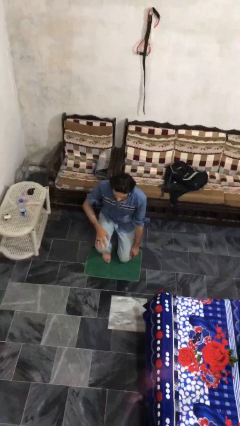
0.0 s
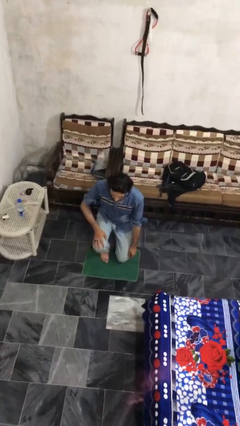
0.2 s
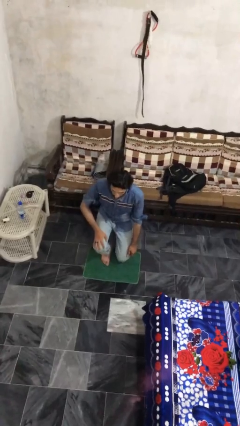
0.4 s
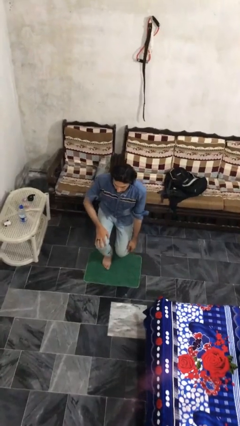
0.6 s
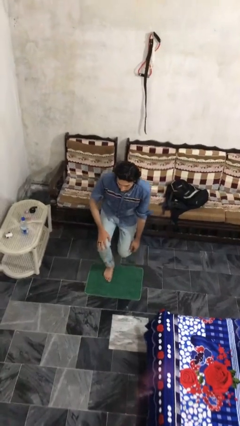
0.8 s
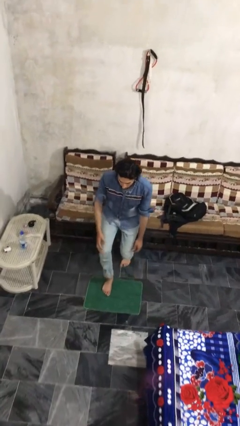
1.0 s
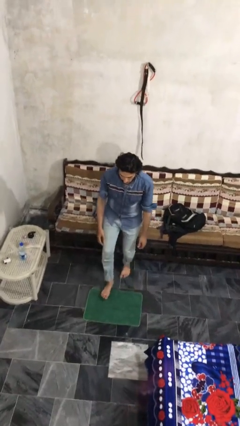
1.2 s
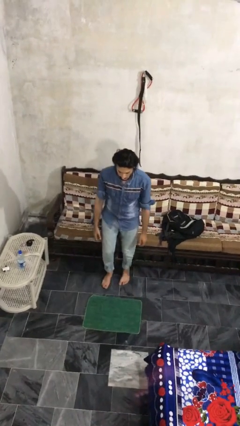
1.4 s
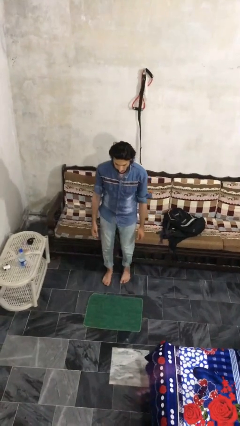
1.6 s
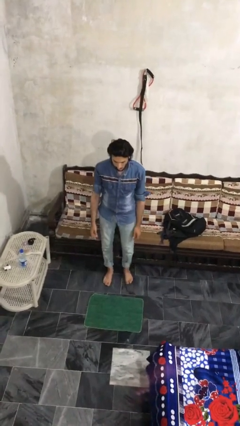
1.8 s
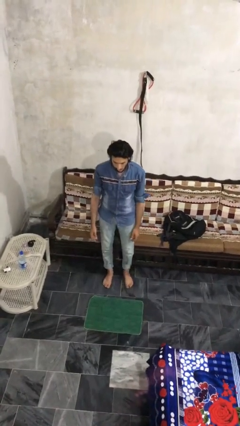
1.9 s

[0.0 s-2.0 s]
person stands up from floor

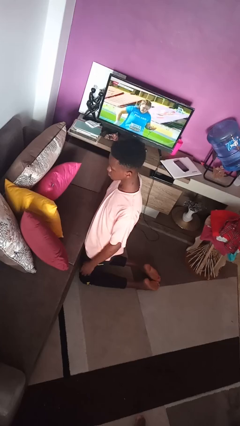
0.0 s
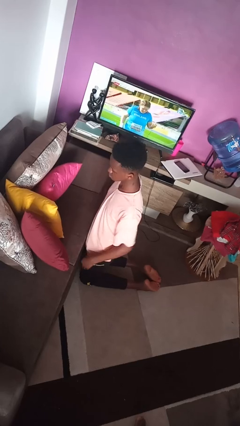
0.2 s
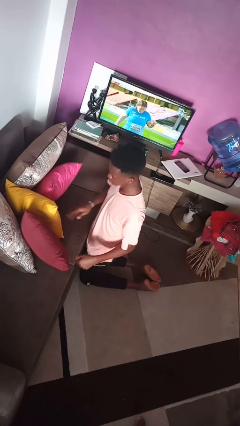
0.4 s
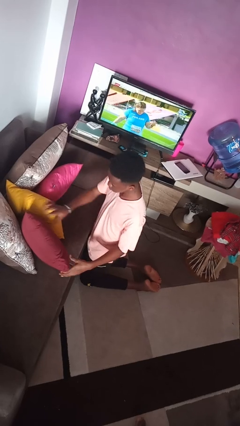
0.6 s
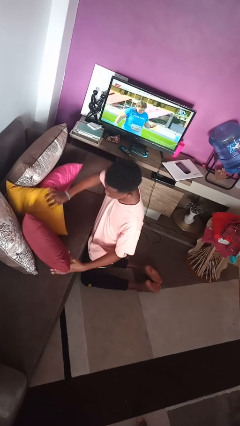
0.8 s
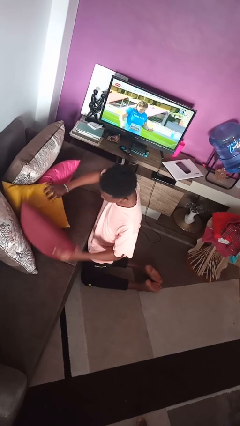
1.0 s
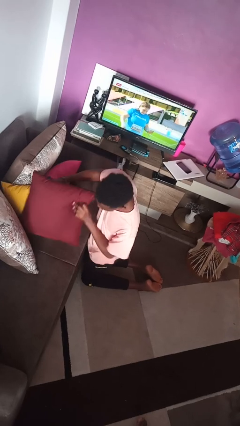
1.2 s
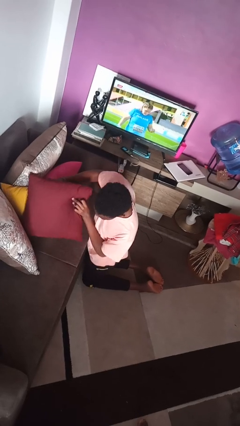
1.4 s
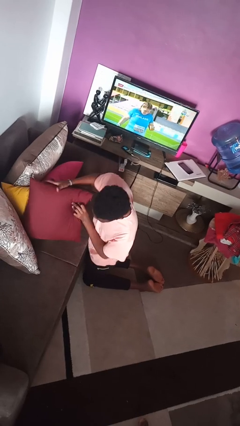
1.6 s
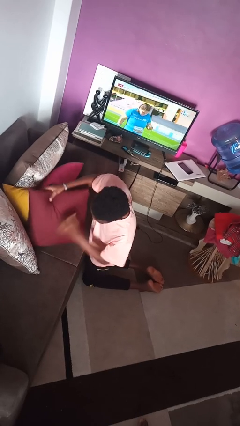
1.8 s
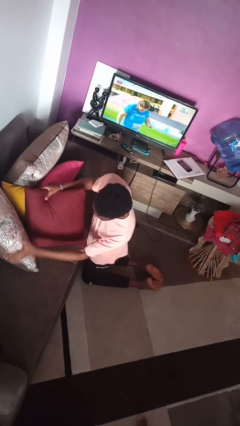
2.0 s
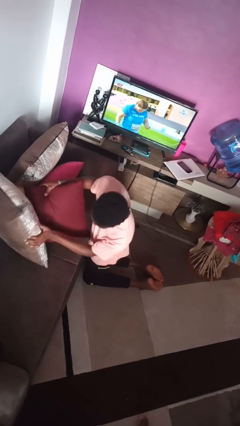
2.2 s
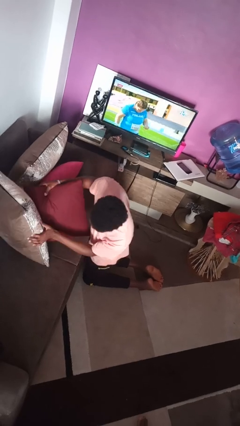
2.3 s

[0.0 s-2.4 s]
person searches in couch

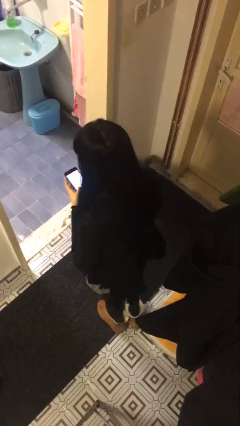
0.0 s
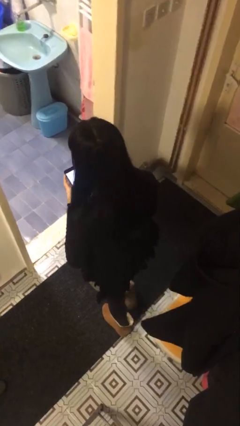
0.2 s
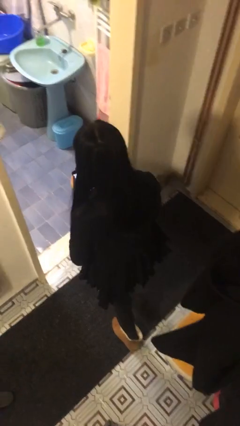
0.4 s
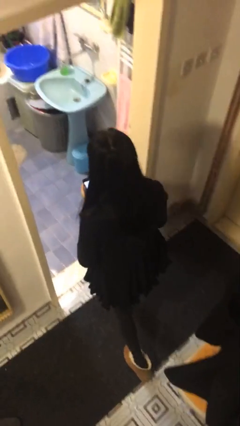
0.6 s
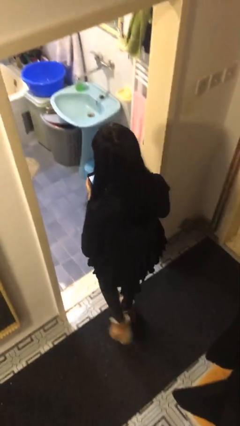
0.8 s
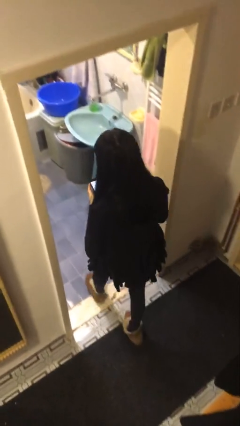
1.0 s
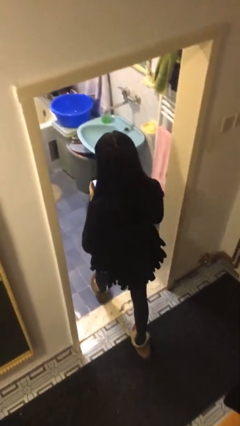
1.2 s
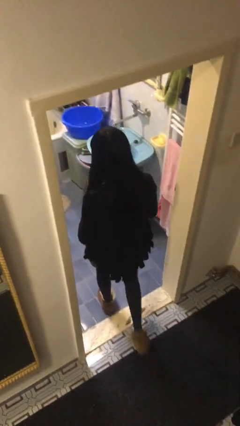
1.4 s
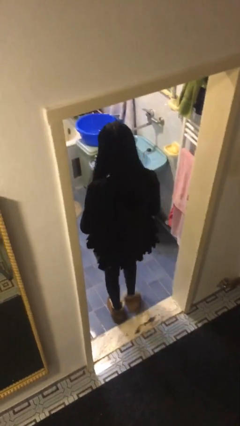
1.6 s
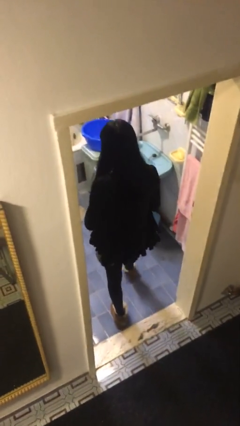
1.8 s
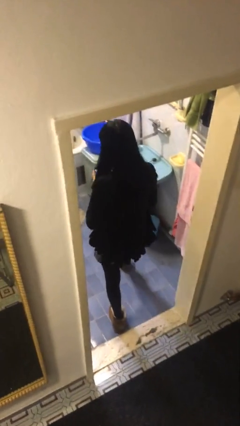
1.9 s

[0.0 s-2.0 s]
person exits scene through structure

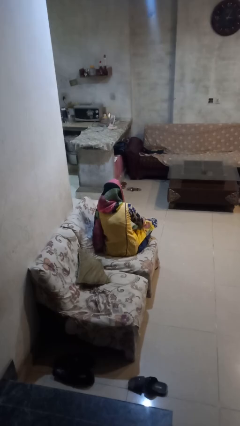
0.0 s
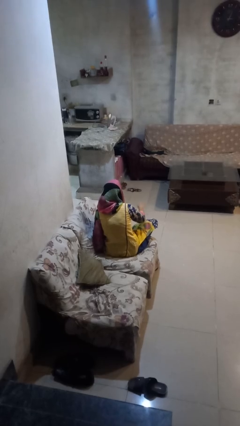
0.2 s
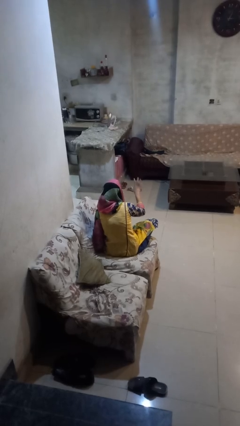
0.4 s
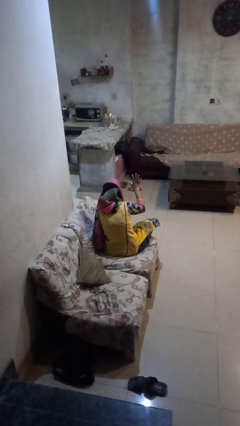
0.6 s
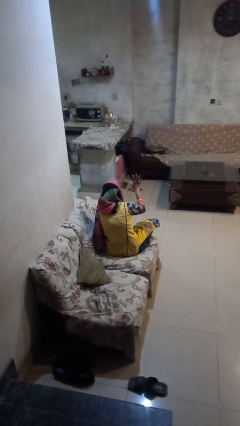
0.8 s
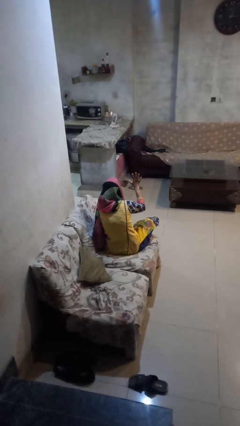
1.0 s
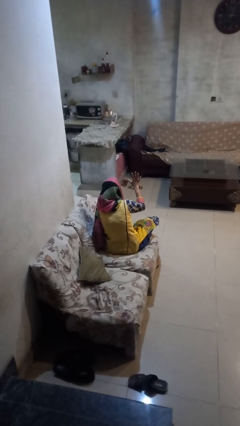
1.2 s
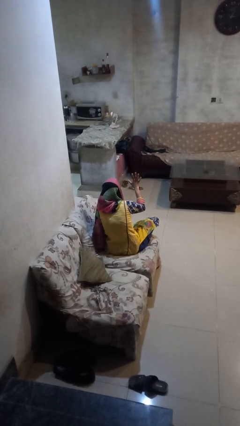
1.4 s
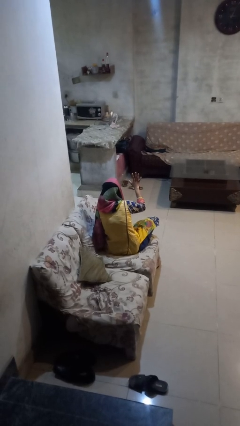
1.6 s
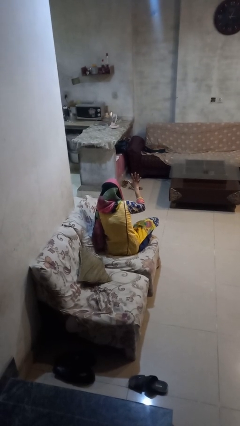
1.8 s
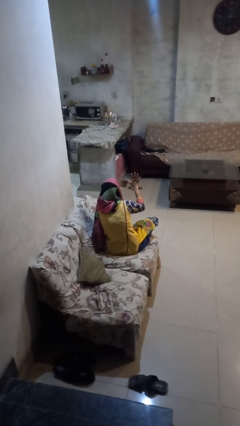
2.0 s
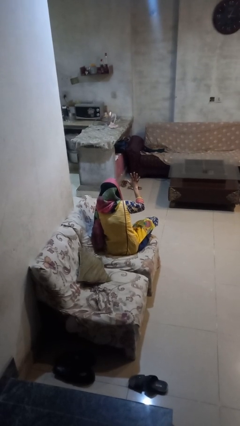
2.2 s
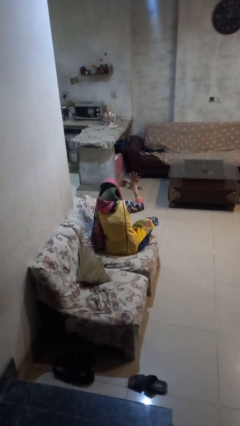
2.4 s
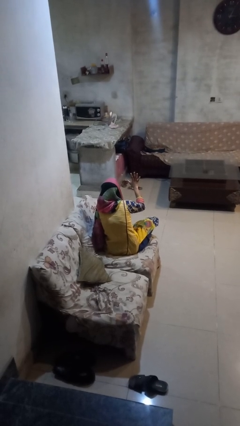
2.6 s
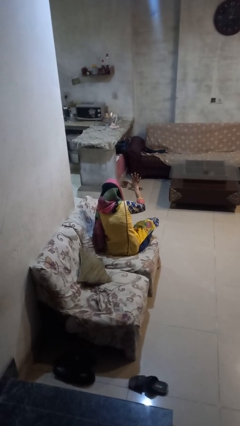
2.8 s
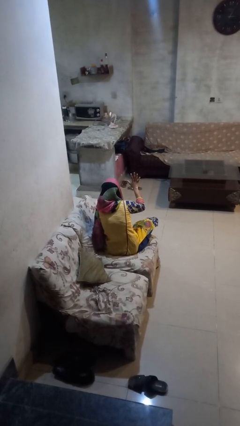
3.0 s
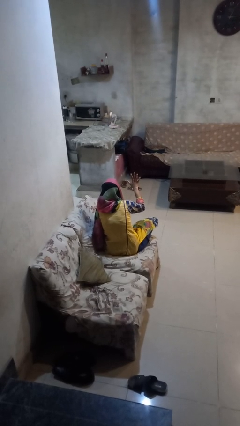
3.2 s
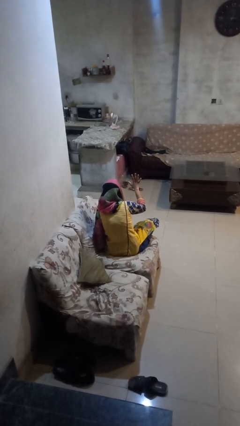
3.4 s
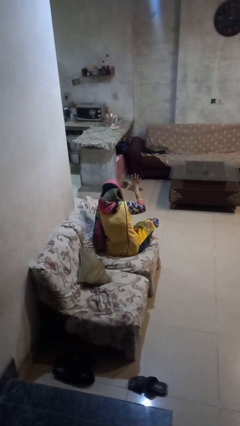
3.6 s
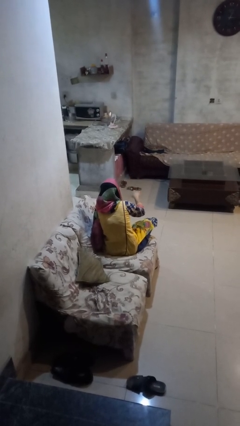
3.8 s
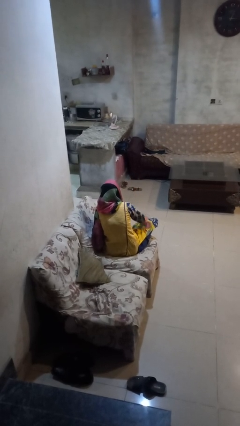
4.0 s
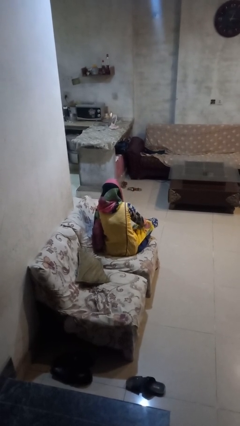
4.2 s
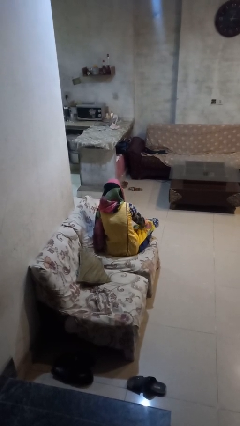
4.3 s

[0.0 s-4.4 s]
person gestures number five

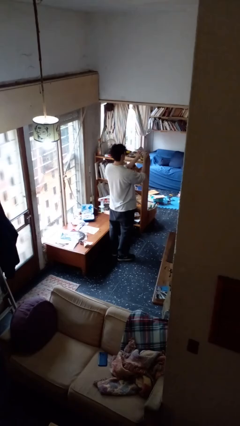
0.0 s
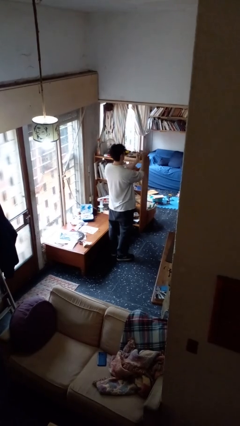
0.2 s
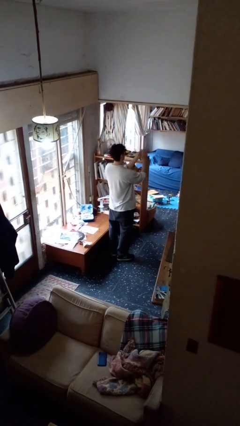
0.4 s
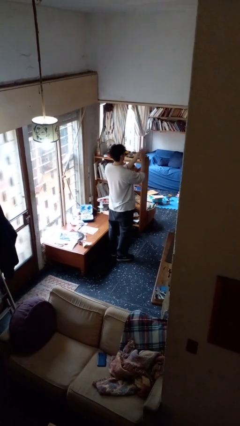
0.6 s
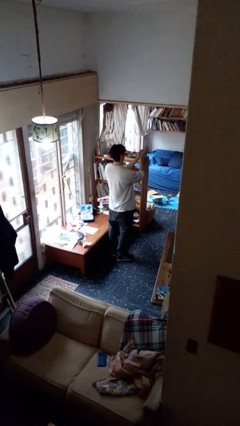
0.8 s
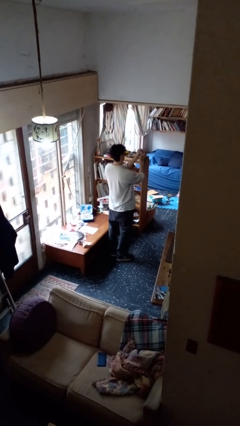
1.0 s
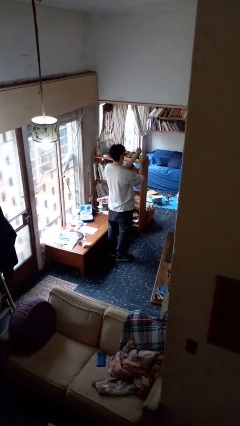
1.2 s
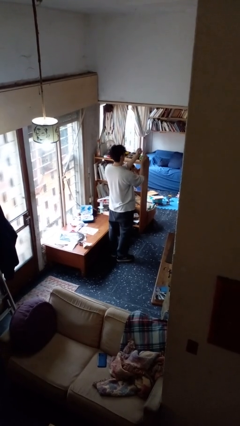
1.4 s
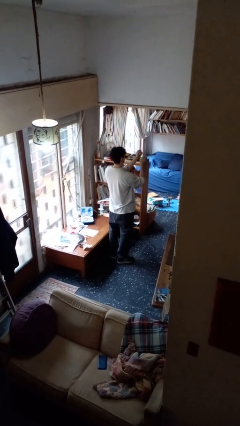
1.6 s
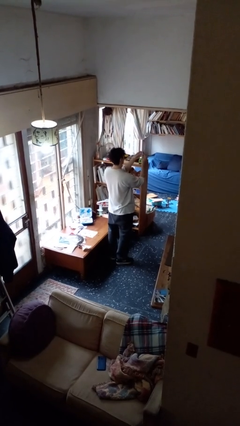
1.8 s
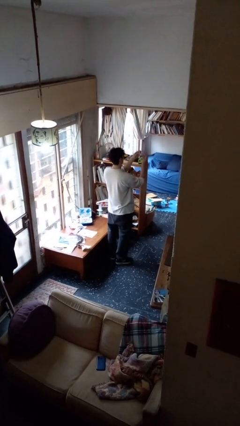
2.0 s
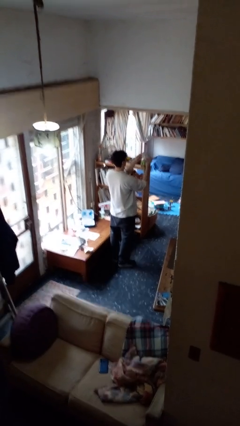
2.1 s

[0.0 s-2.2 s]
person crumples paper

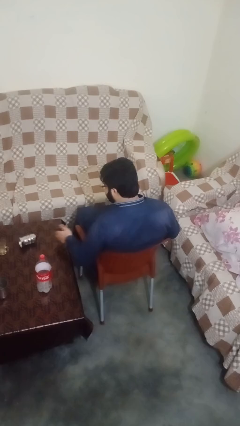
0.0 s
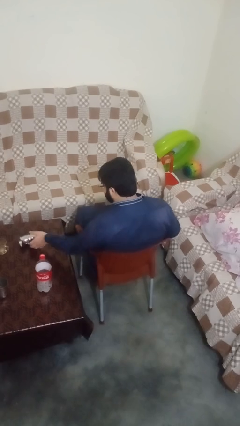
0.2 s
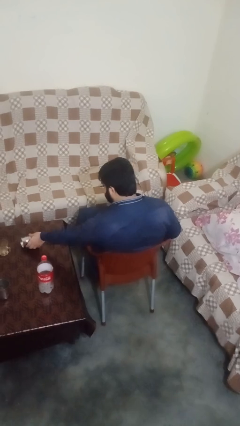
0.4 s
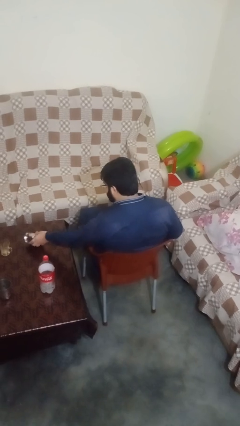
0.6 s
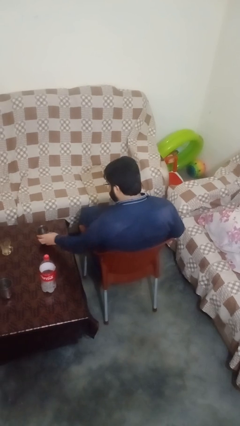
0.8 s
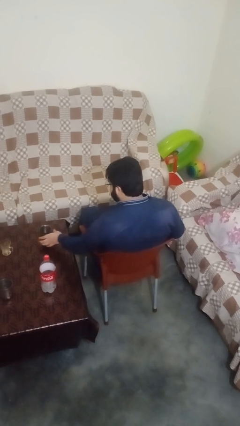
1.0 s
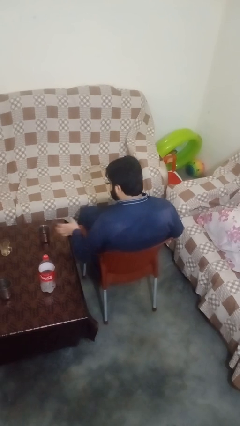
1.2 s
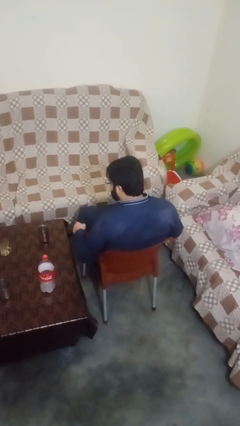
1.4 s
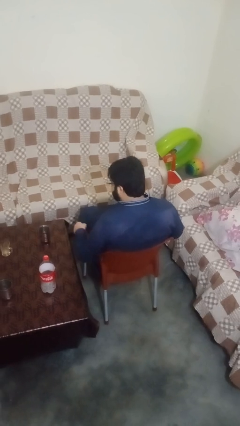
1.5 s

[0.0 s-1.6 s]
person sets upright glass

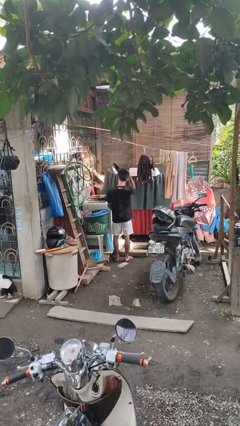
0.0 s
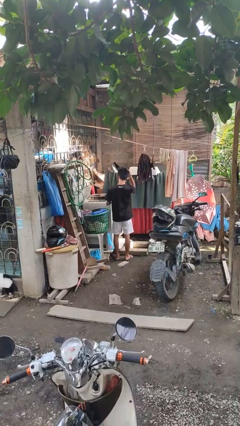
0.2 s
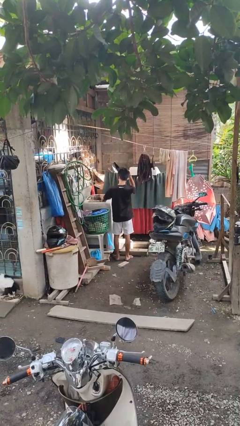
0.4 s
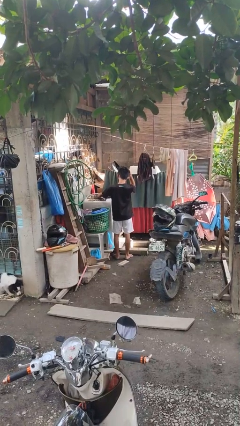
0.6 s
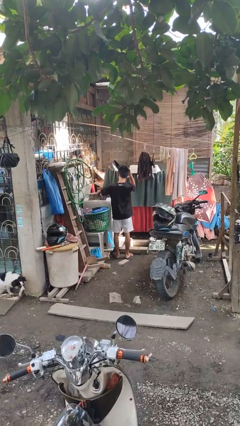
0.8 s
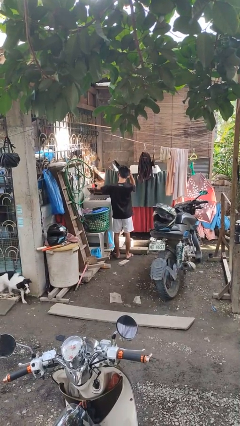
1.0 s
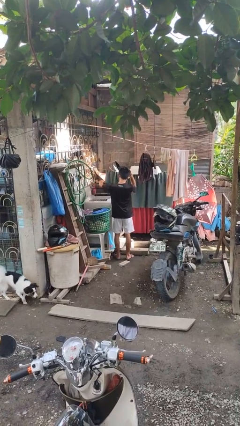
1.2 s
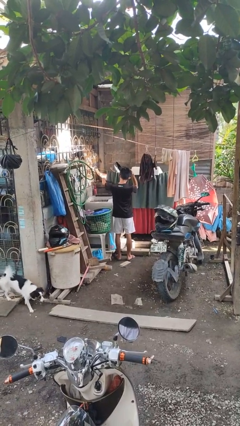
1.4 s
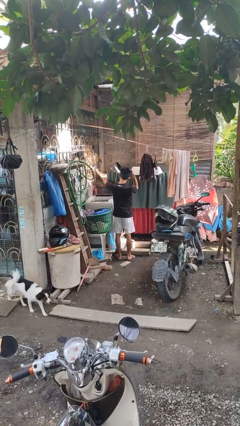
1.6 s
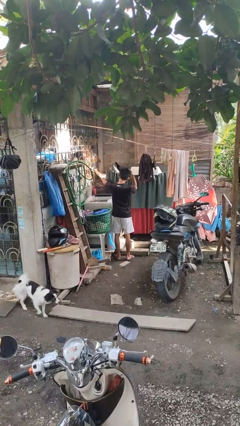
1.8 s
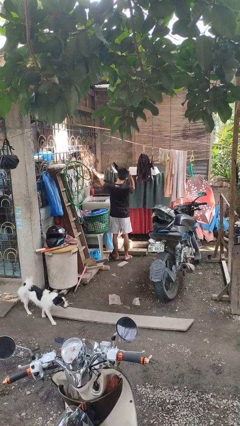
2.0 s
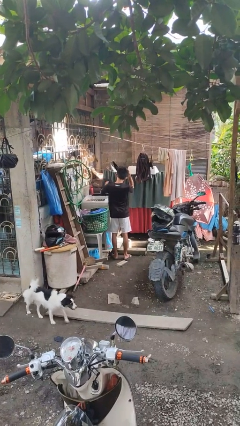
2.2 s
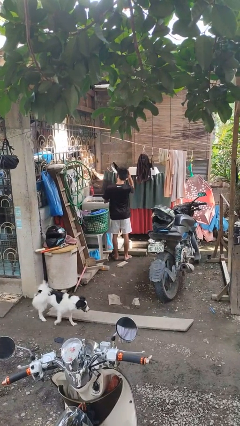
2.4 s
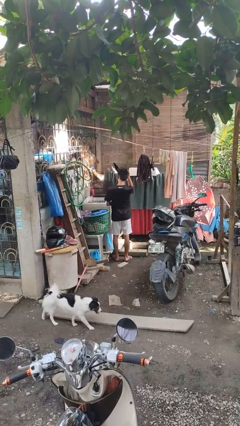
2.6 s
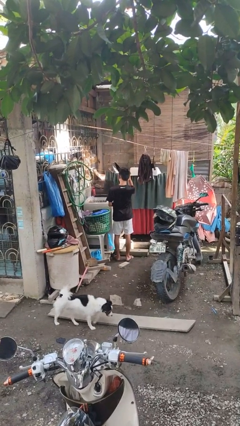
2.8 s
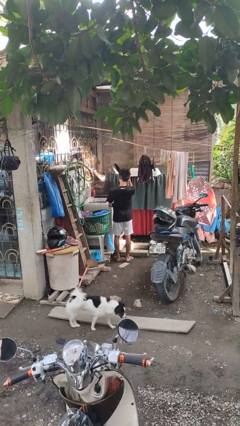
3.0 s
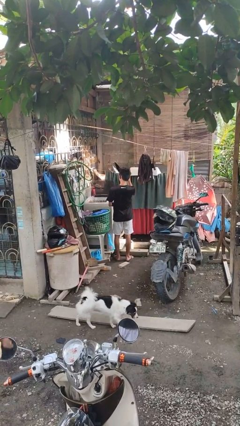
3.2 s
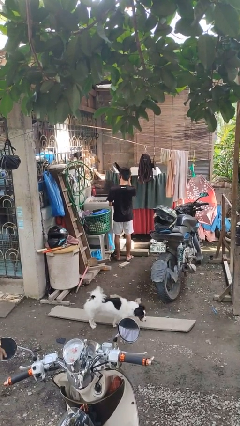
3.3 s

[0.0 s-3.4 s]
person opens clothes washer
